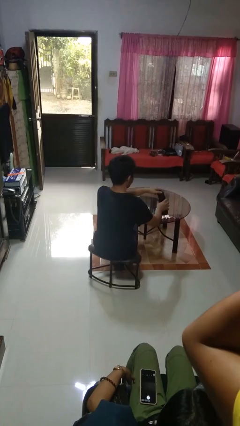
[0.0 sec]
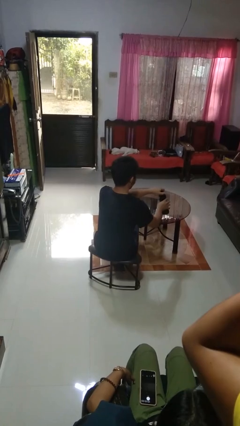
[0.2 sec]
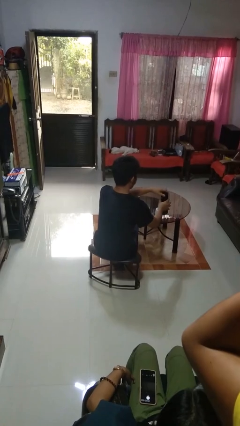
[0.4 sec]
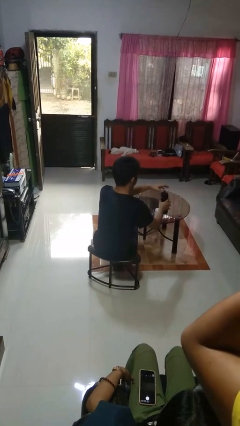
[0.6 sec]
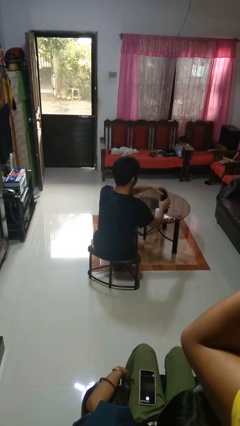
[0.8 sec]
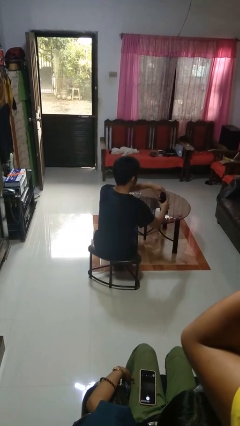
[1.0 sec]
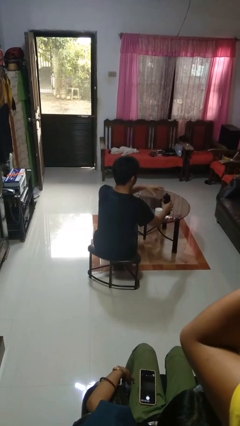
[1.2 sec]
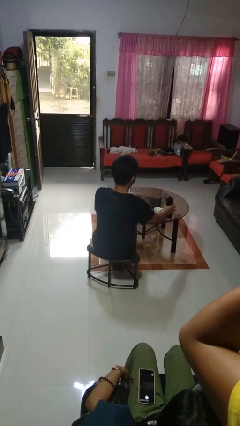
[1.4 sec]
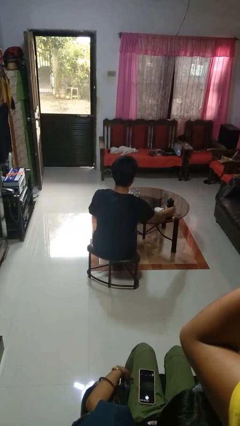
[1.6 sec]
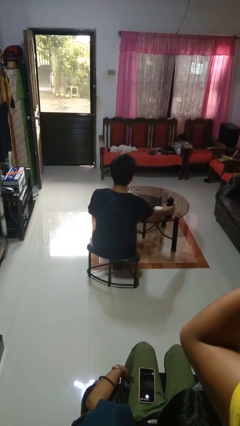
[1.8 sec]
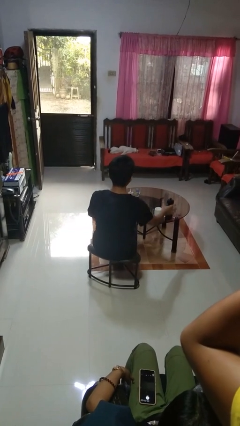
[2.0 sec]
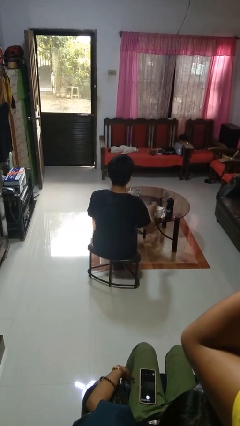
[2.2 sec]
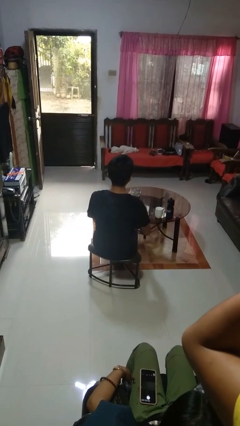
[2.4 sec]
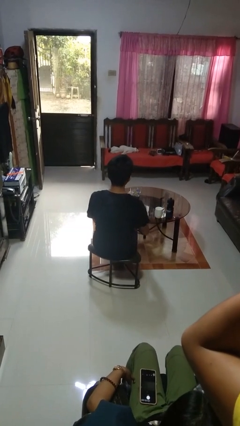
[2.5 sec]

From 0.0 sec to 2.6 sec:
person screws lid to bottle

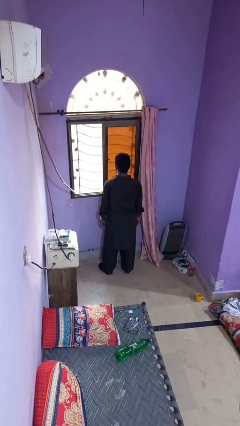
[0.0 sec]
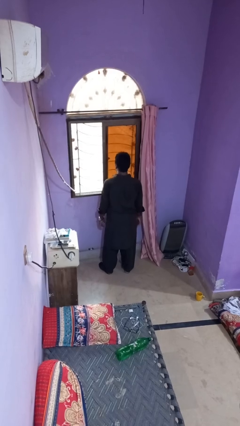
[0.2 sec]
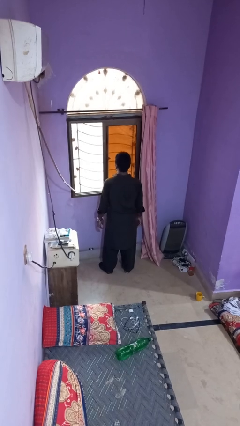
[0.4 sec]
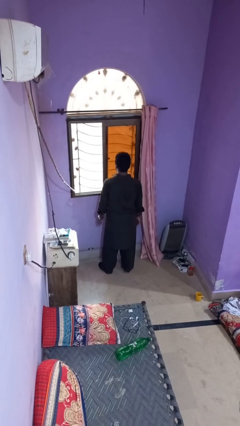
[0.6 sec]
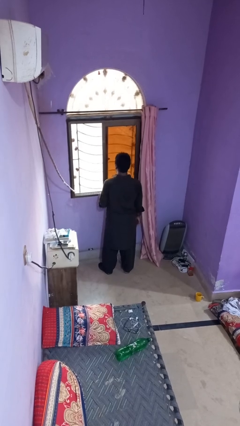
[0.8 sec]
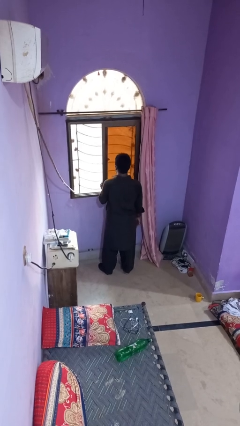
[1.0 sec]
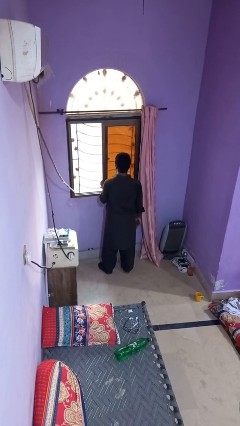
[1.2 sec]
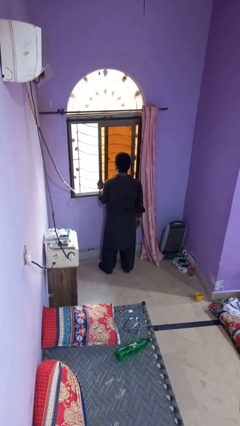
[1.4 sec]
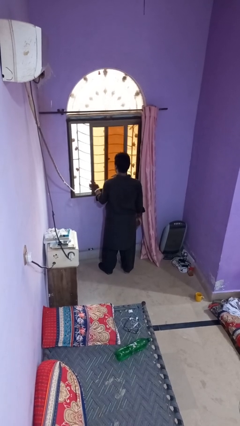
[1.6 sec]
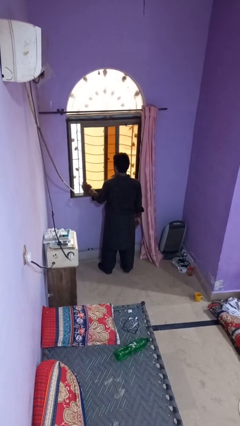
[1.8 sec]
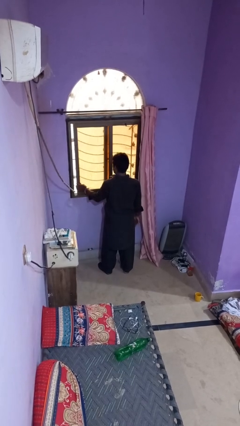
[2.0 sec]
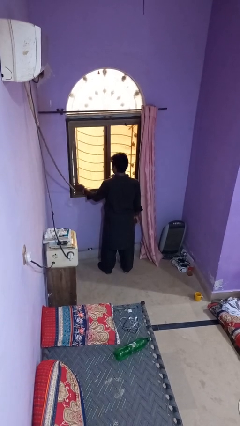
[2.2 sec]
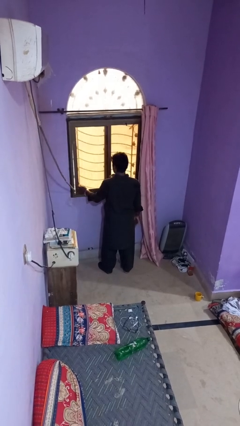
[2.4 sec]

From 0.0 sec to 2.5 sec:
person closes home window

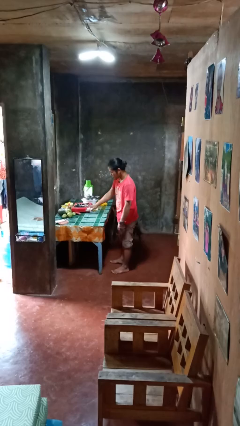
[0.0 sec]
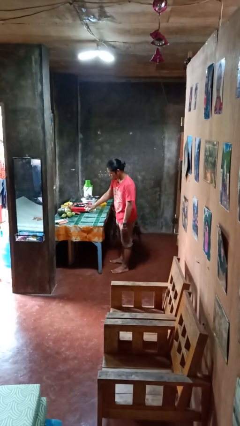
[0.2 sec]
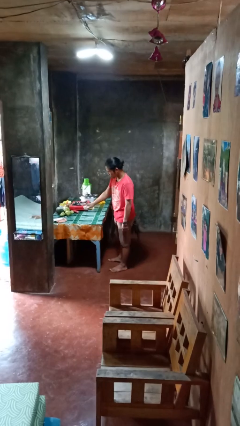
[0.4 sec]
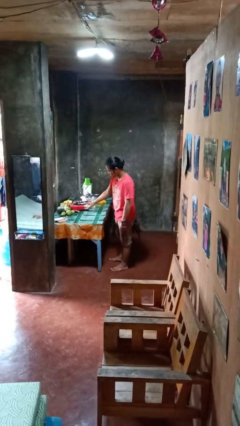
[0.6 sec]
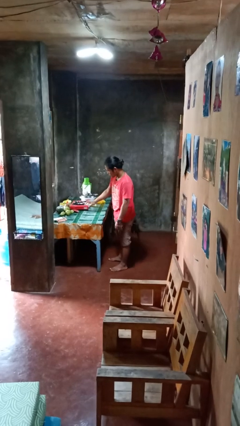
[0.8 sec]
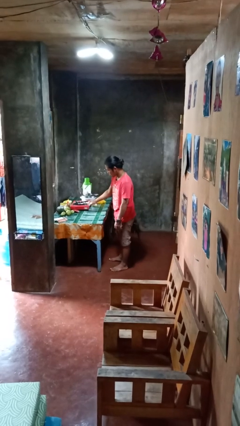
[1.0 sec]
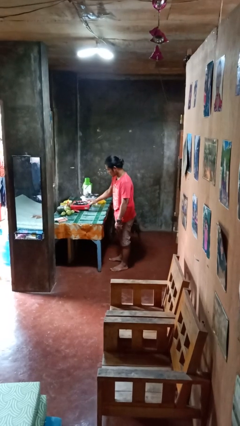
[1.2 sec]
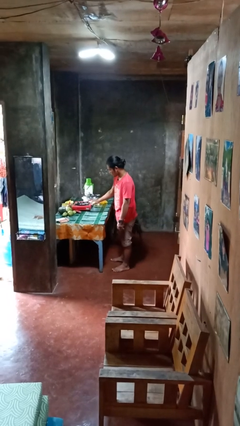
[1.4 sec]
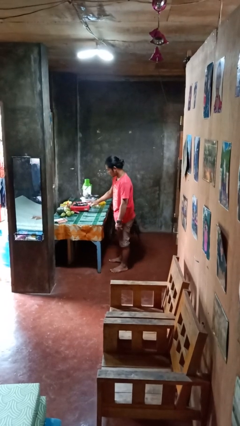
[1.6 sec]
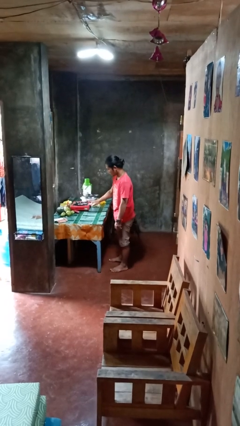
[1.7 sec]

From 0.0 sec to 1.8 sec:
person sprays from bottle

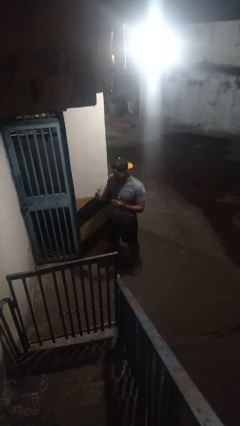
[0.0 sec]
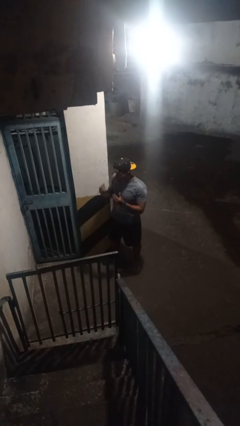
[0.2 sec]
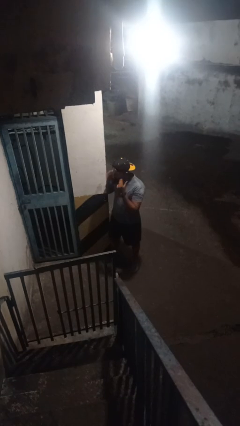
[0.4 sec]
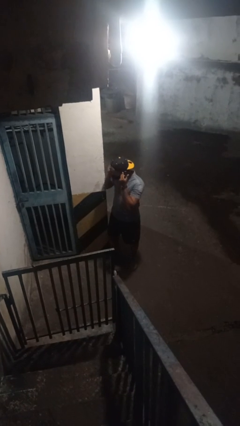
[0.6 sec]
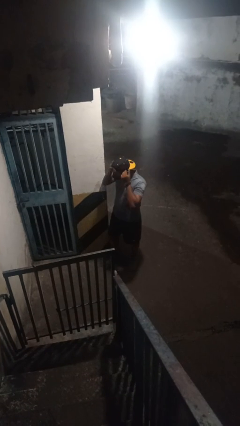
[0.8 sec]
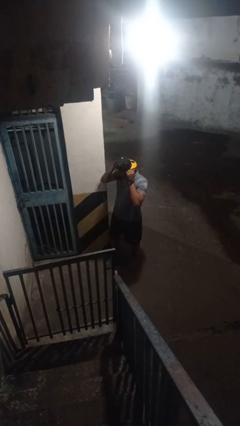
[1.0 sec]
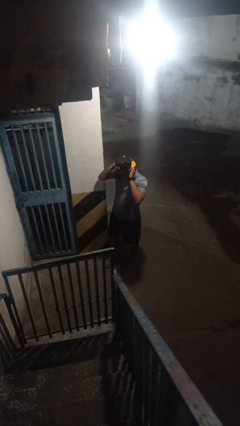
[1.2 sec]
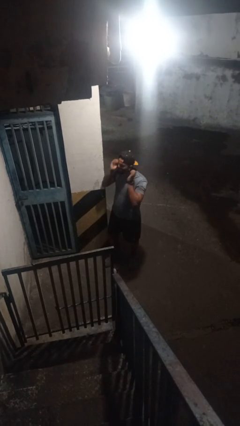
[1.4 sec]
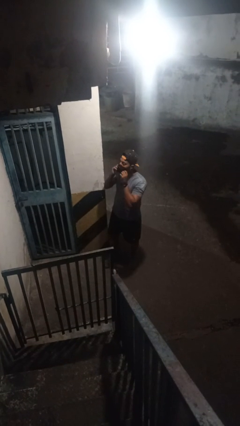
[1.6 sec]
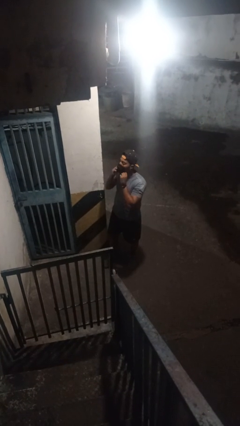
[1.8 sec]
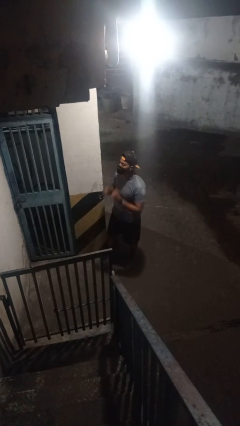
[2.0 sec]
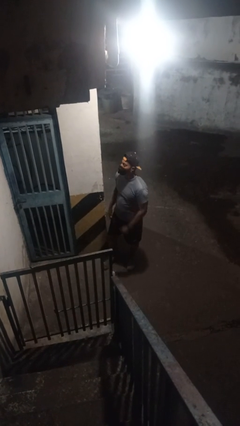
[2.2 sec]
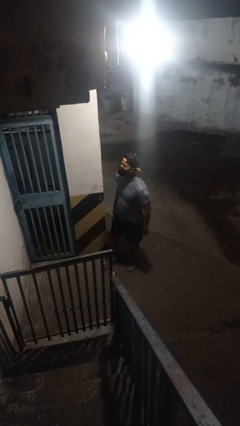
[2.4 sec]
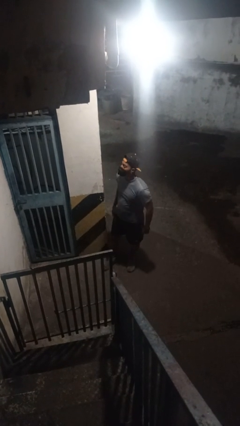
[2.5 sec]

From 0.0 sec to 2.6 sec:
person puts on facemask

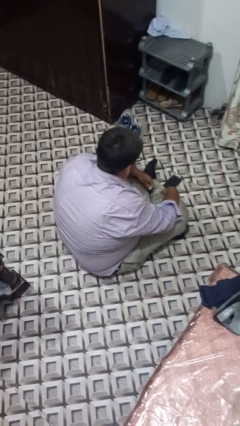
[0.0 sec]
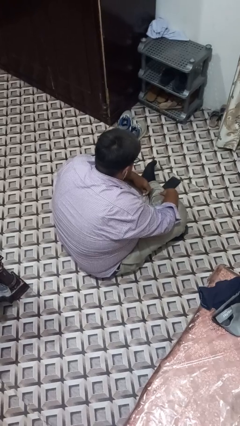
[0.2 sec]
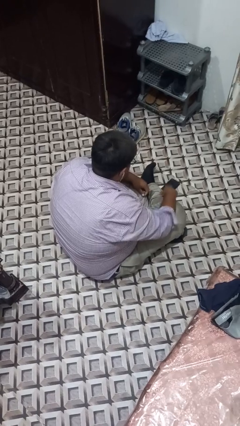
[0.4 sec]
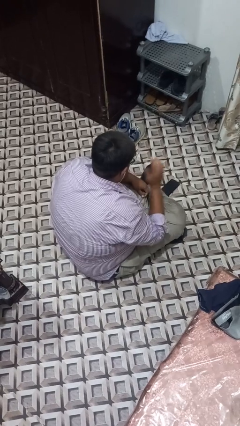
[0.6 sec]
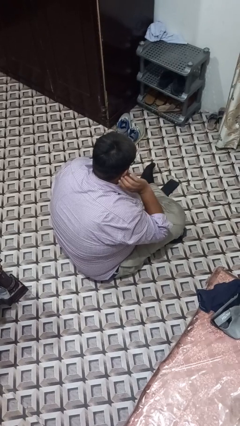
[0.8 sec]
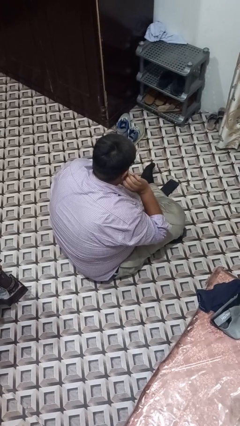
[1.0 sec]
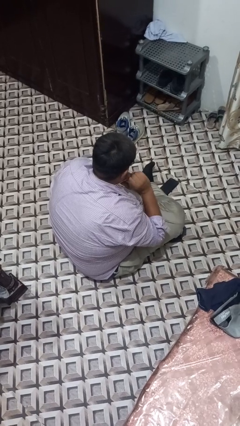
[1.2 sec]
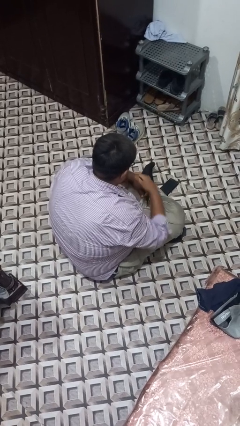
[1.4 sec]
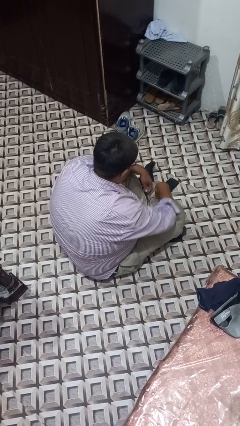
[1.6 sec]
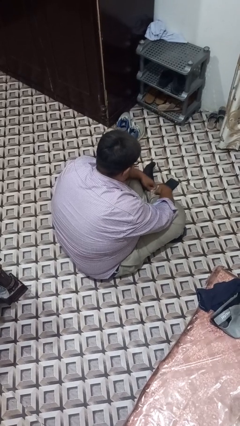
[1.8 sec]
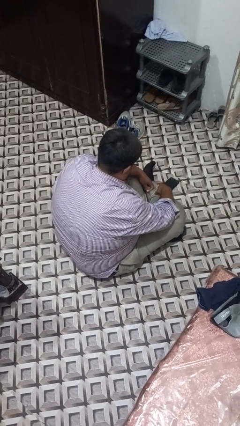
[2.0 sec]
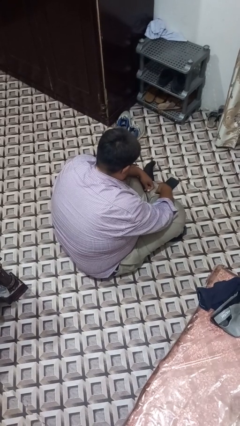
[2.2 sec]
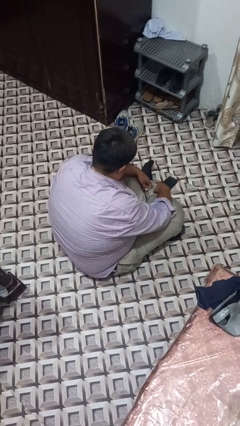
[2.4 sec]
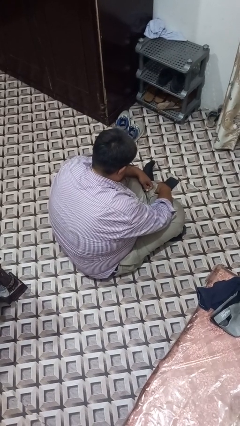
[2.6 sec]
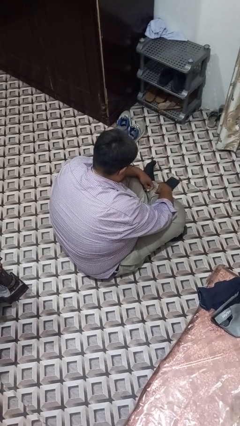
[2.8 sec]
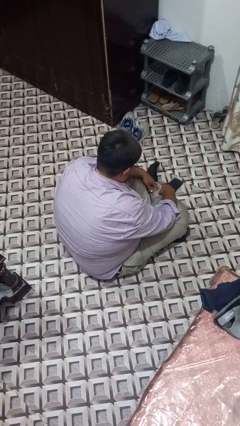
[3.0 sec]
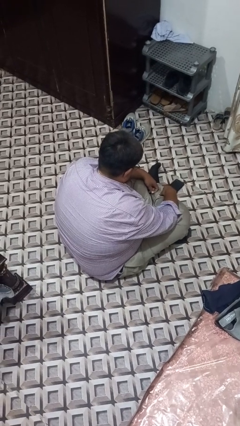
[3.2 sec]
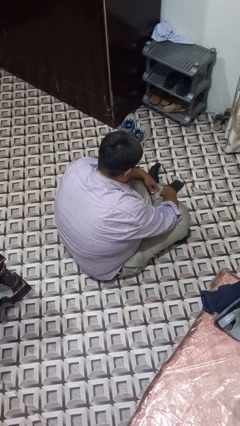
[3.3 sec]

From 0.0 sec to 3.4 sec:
person takes off headphones

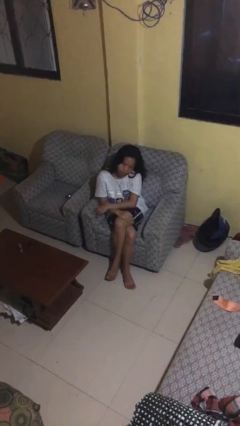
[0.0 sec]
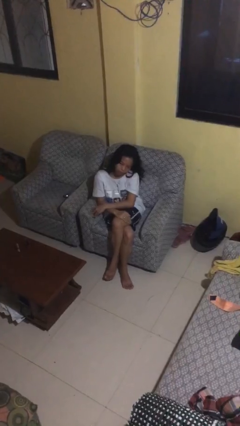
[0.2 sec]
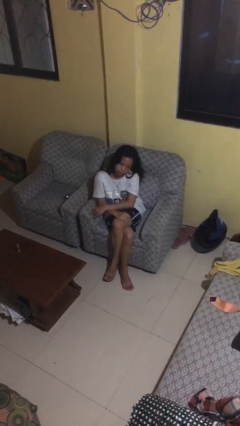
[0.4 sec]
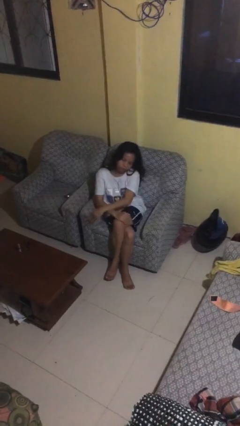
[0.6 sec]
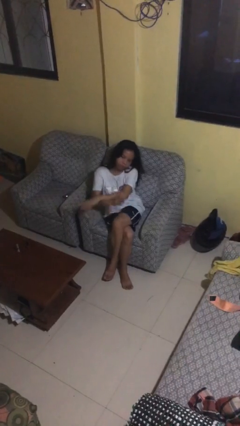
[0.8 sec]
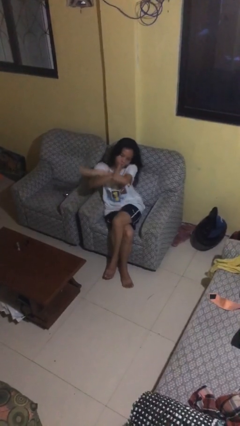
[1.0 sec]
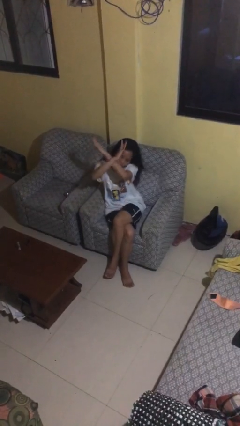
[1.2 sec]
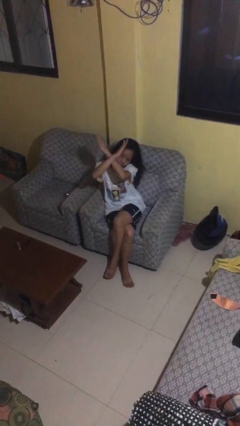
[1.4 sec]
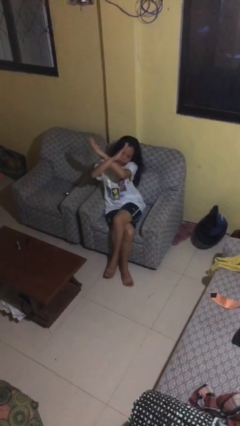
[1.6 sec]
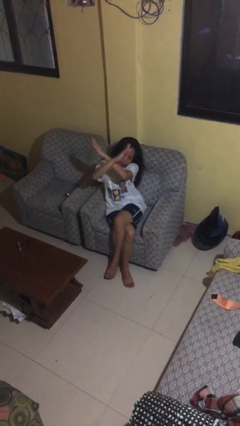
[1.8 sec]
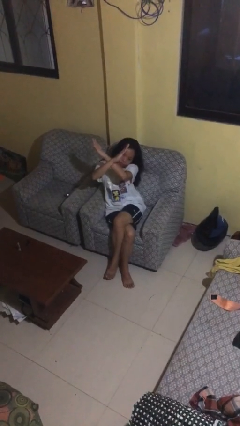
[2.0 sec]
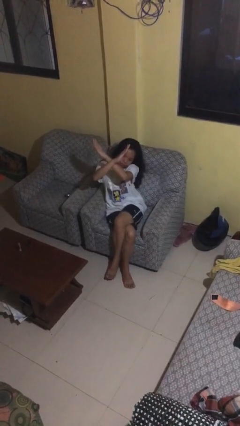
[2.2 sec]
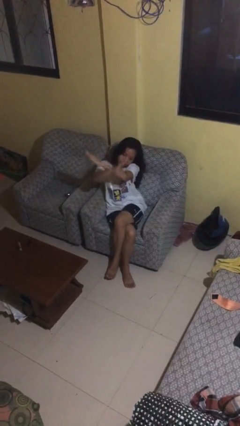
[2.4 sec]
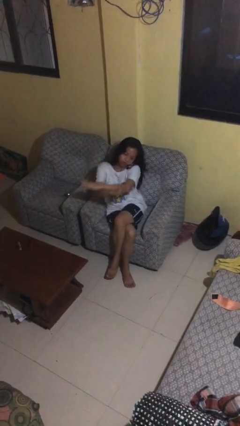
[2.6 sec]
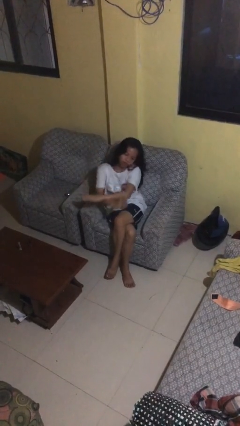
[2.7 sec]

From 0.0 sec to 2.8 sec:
person gestures arms x

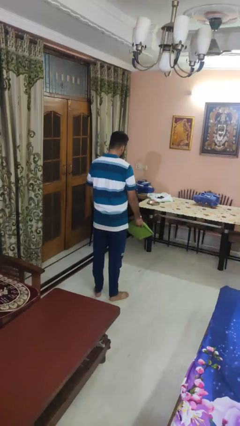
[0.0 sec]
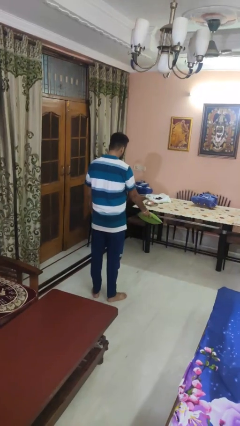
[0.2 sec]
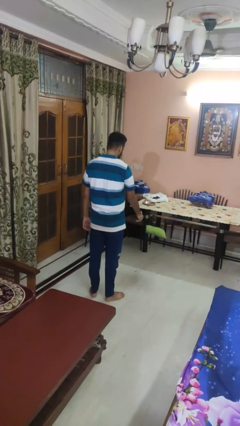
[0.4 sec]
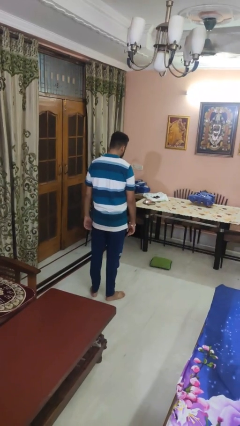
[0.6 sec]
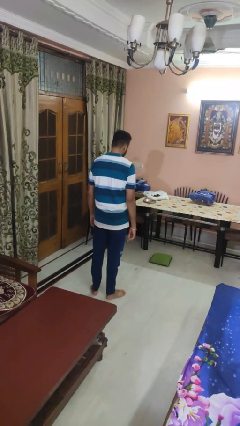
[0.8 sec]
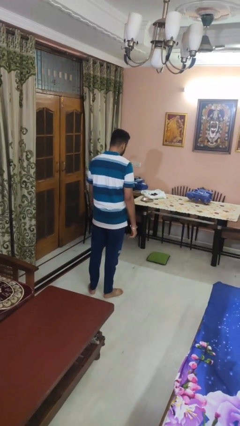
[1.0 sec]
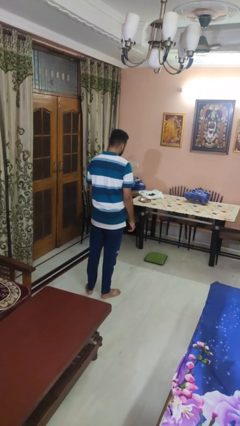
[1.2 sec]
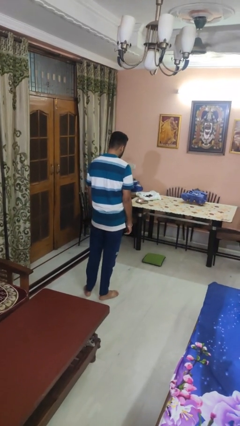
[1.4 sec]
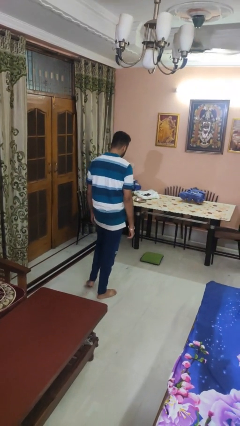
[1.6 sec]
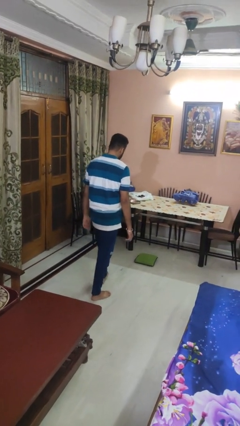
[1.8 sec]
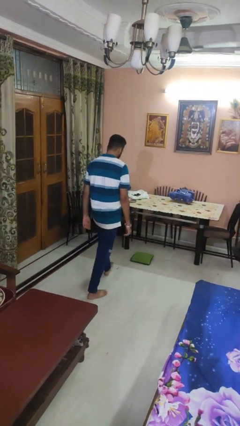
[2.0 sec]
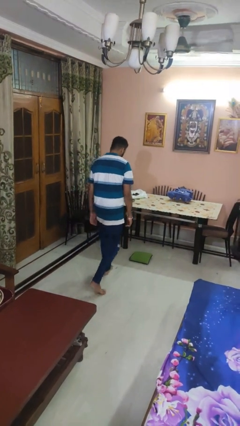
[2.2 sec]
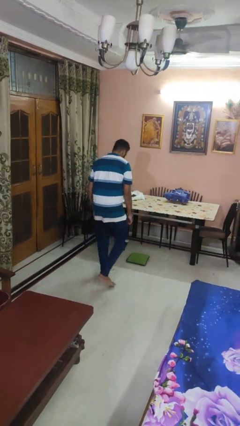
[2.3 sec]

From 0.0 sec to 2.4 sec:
person throws object to ground
